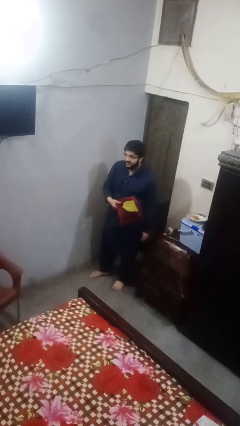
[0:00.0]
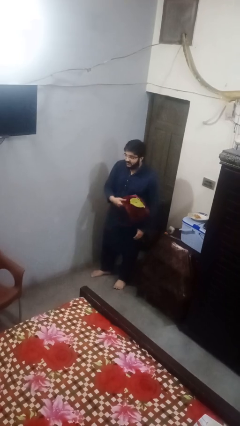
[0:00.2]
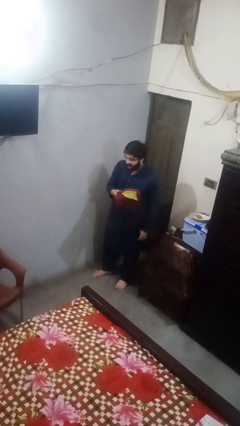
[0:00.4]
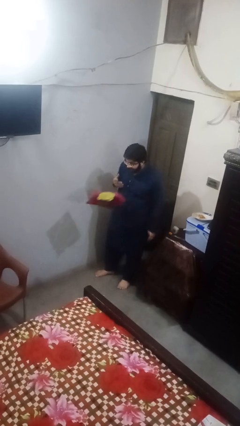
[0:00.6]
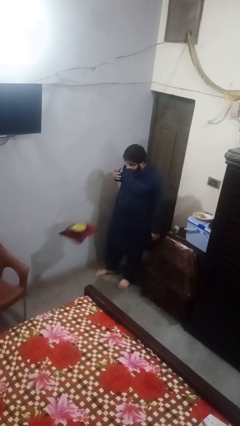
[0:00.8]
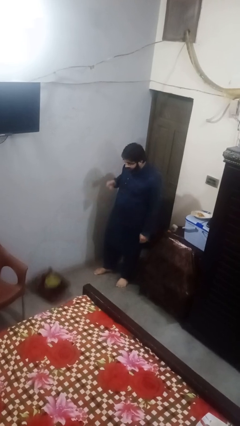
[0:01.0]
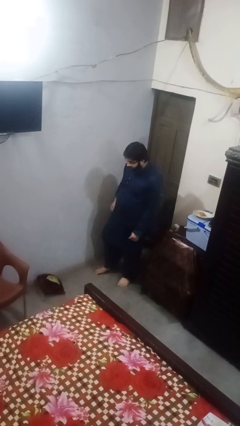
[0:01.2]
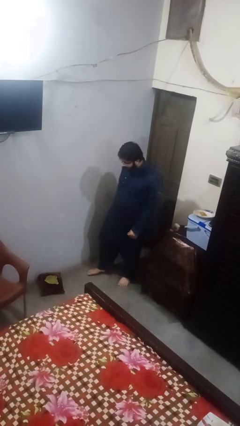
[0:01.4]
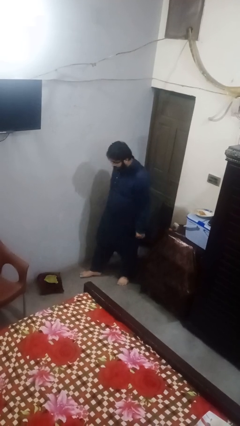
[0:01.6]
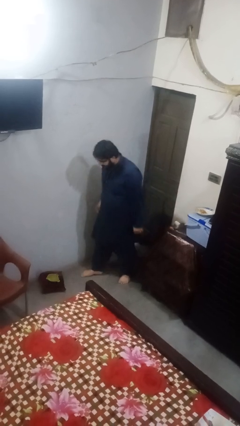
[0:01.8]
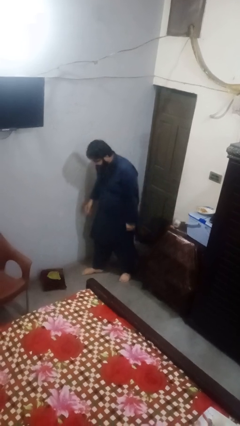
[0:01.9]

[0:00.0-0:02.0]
person throws object to ground

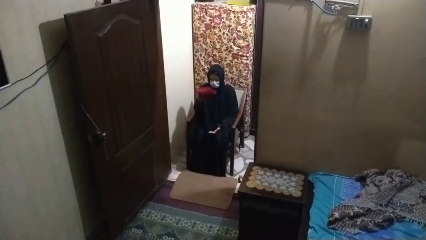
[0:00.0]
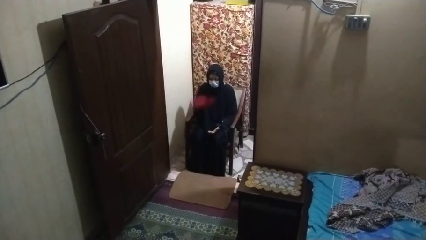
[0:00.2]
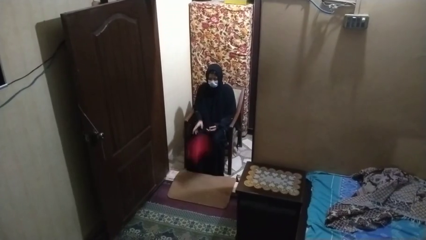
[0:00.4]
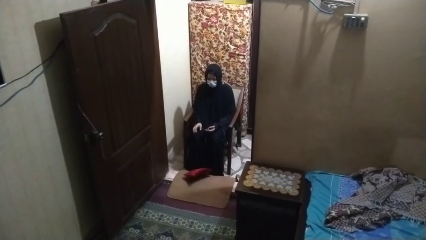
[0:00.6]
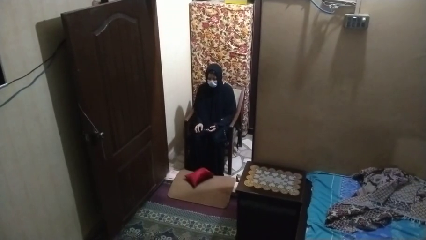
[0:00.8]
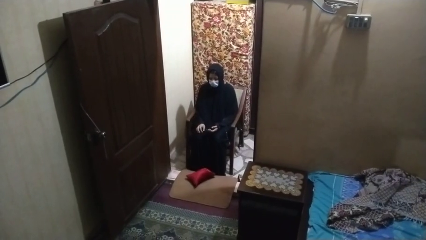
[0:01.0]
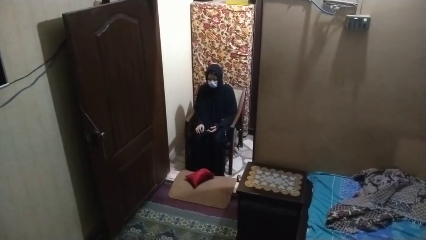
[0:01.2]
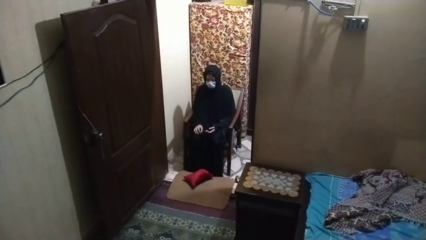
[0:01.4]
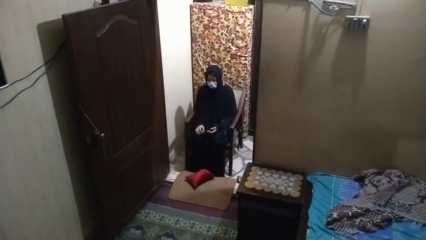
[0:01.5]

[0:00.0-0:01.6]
person throws object into air

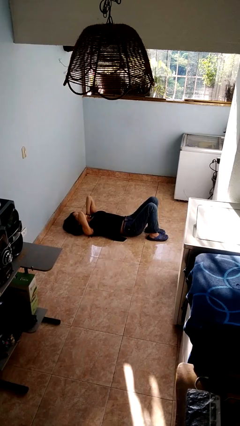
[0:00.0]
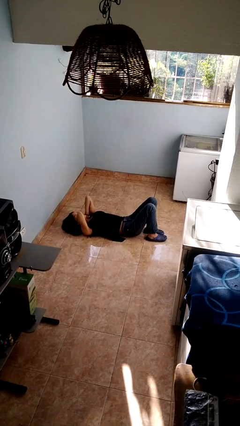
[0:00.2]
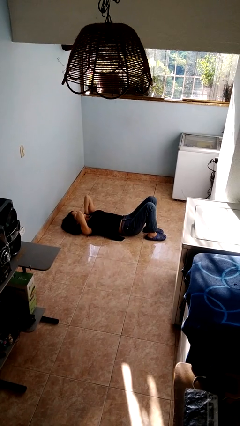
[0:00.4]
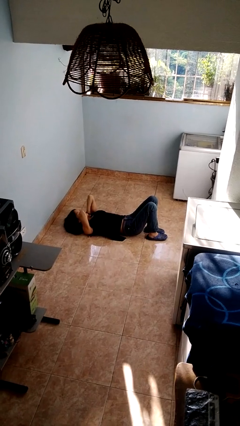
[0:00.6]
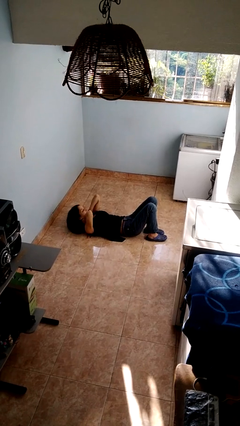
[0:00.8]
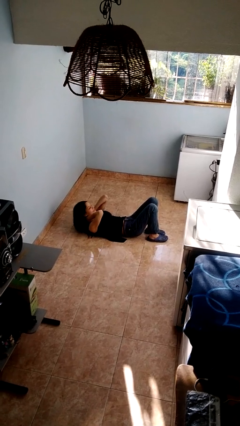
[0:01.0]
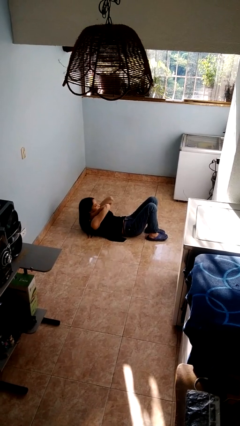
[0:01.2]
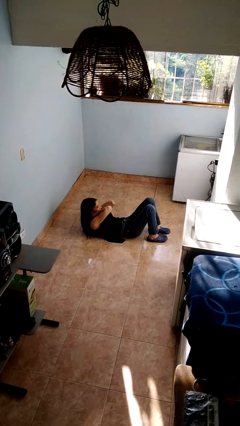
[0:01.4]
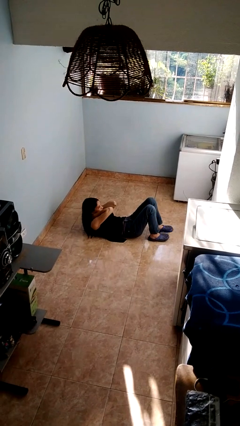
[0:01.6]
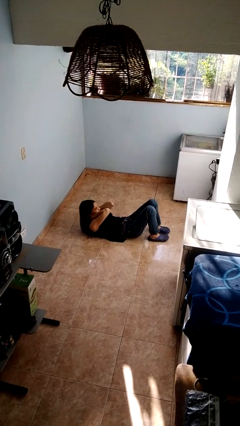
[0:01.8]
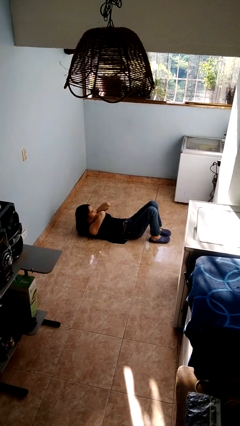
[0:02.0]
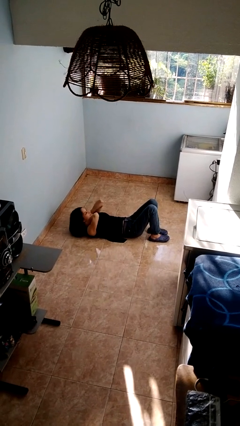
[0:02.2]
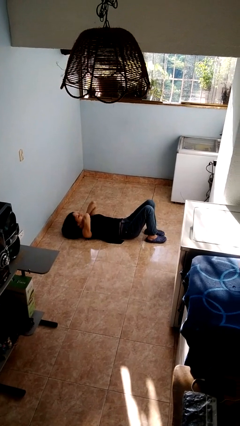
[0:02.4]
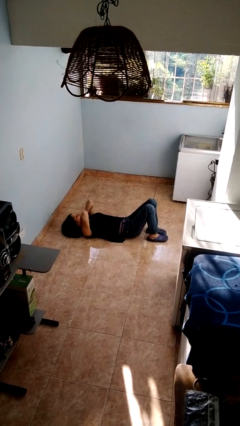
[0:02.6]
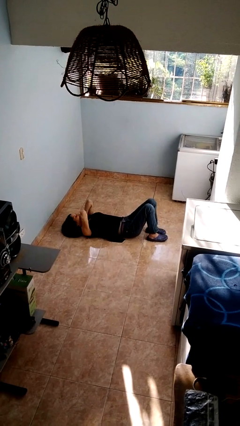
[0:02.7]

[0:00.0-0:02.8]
person exercises with situp

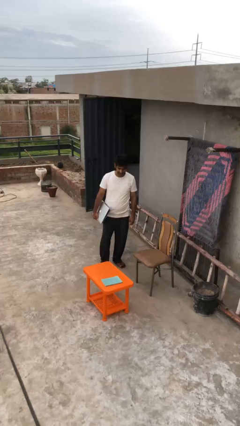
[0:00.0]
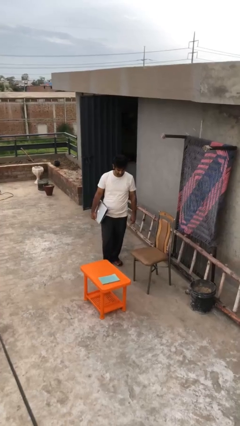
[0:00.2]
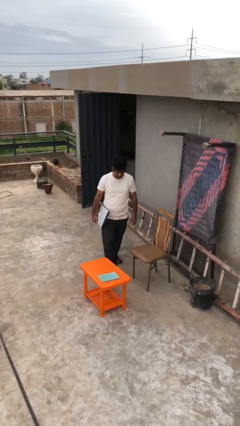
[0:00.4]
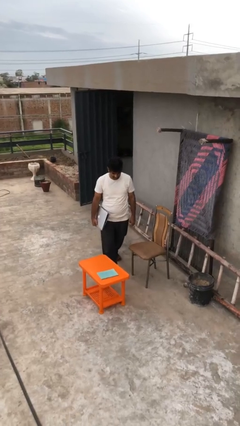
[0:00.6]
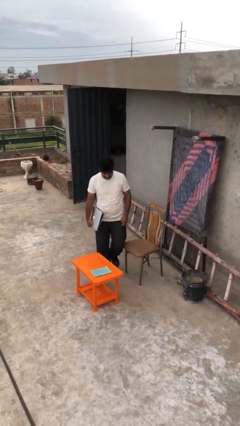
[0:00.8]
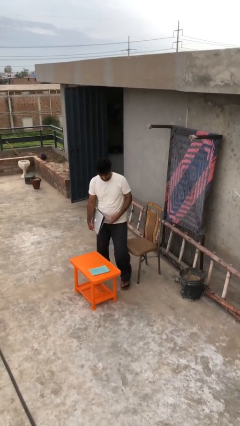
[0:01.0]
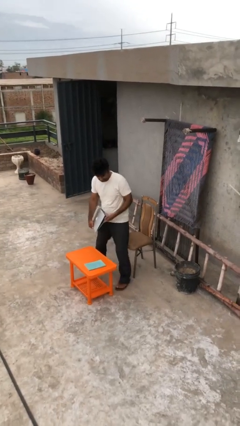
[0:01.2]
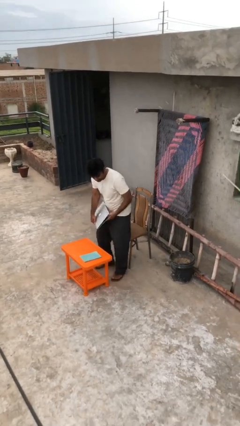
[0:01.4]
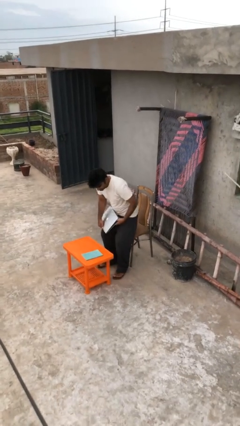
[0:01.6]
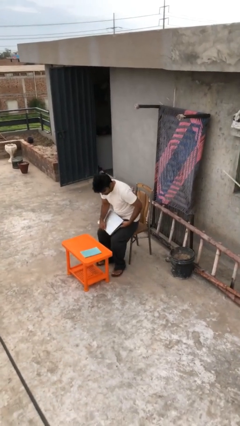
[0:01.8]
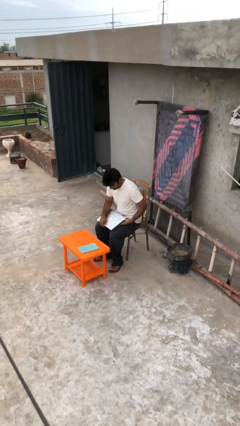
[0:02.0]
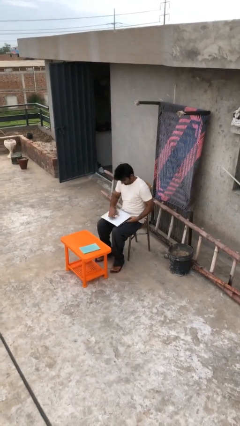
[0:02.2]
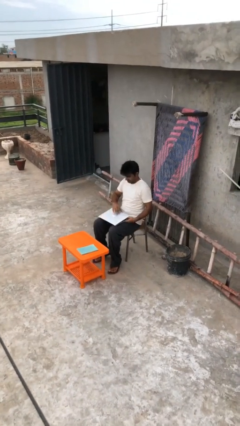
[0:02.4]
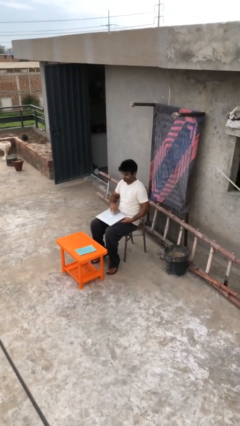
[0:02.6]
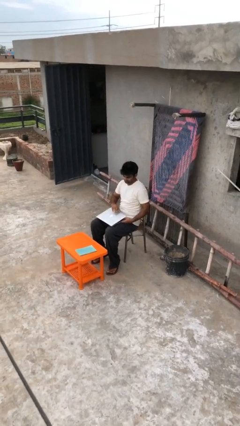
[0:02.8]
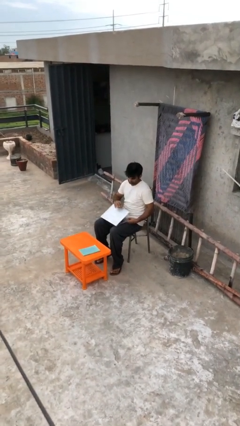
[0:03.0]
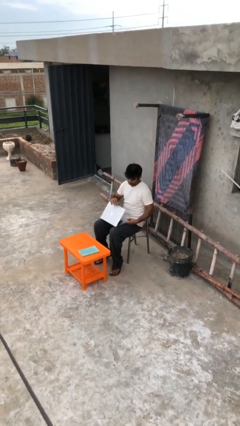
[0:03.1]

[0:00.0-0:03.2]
person sits down

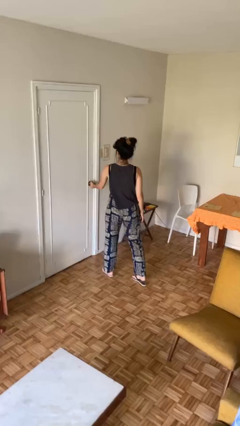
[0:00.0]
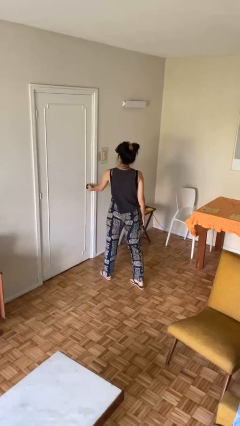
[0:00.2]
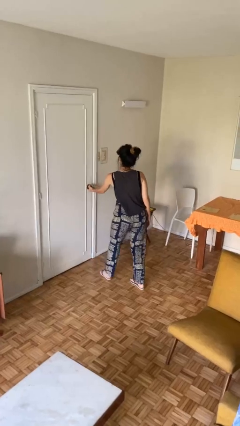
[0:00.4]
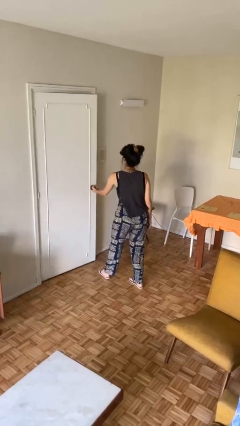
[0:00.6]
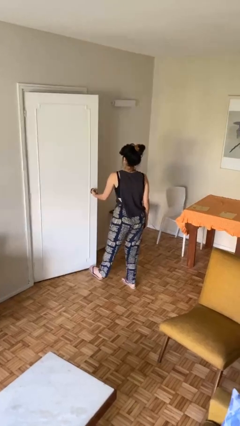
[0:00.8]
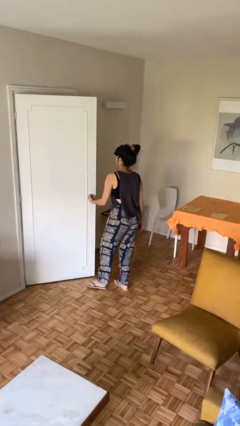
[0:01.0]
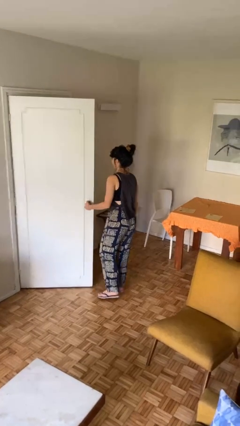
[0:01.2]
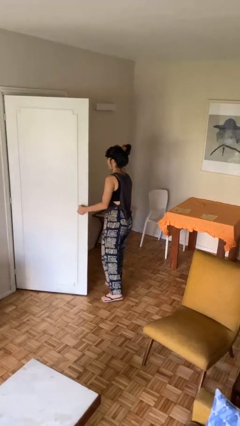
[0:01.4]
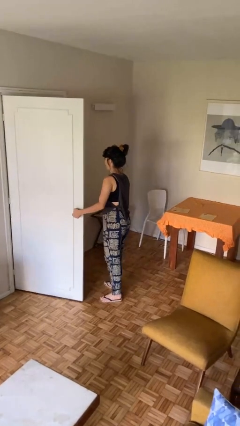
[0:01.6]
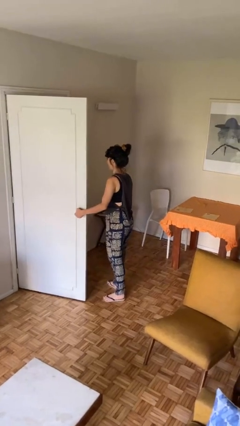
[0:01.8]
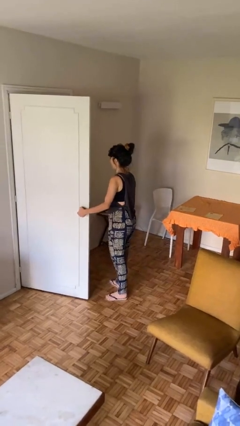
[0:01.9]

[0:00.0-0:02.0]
person opens facility door

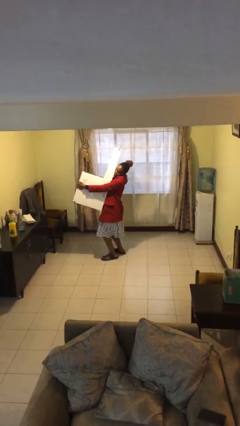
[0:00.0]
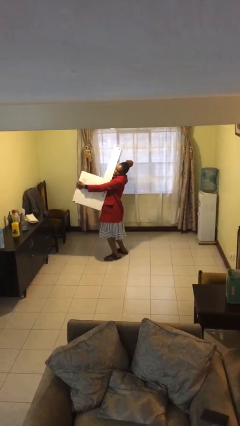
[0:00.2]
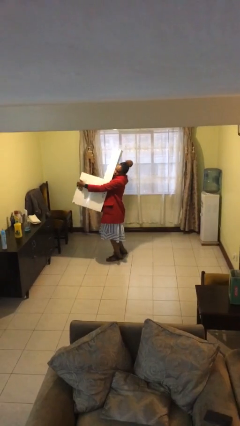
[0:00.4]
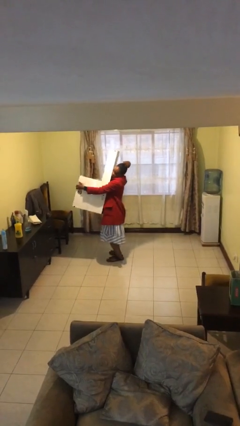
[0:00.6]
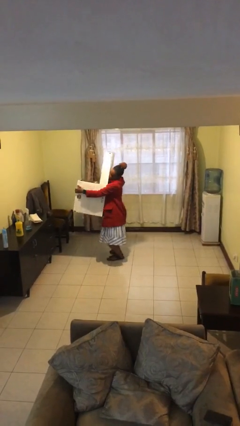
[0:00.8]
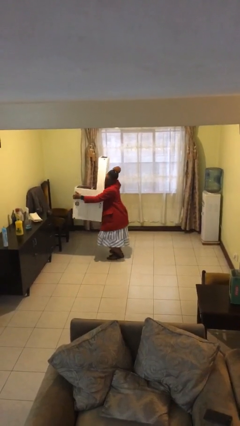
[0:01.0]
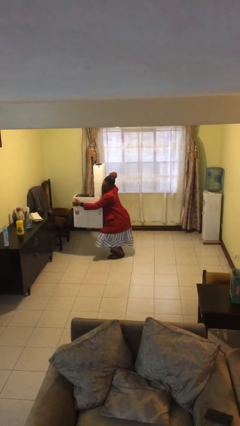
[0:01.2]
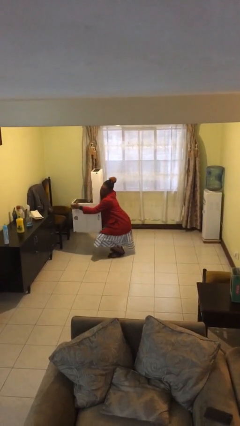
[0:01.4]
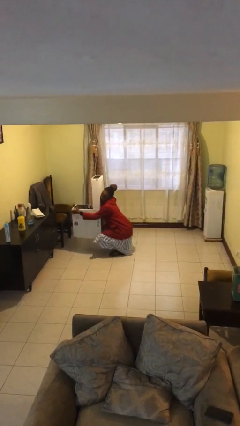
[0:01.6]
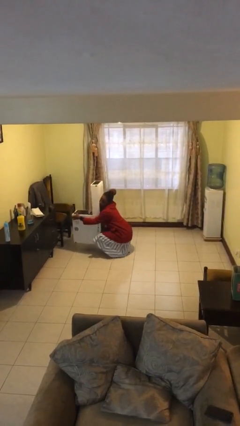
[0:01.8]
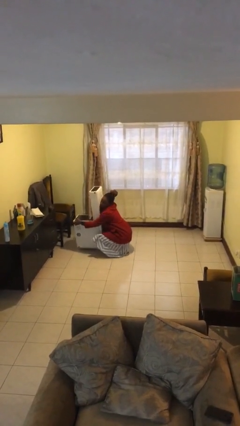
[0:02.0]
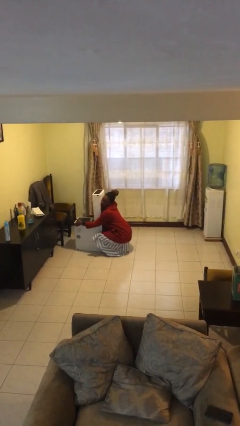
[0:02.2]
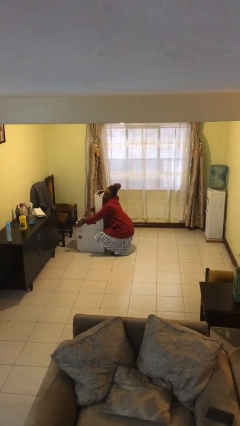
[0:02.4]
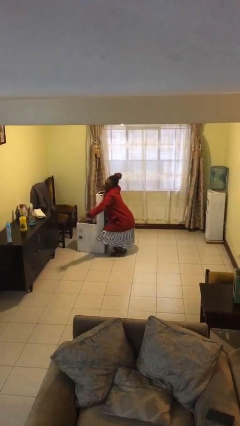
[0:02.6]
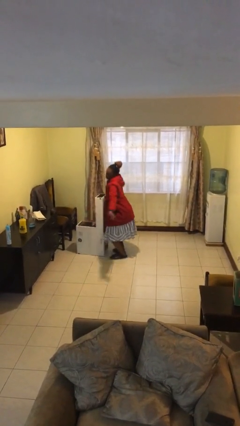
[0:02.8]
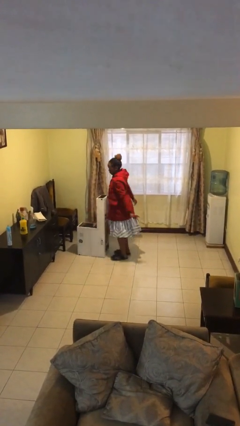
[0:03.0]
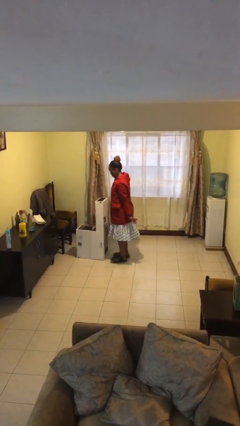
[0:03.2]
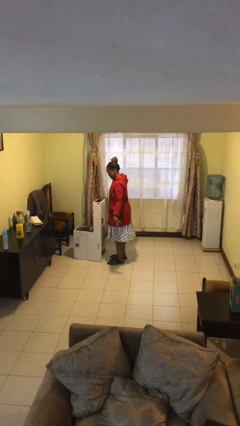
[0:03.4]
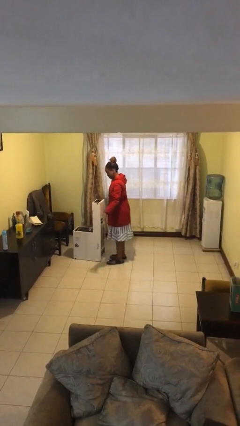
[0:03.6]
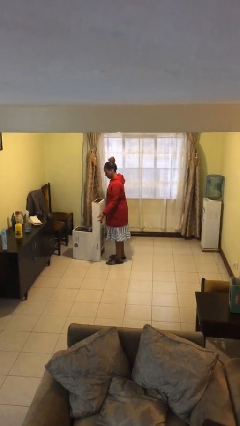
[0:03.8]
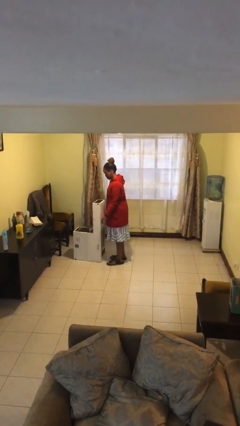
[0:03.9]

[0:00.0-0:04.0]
person puts down object on floor

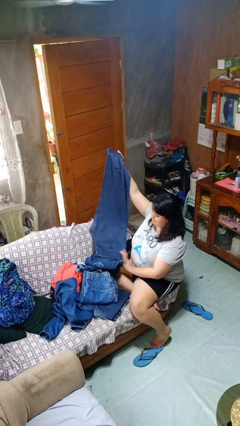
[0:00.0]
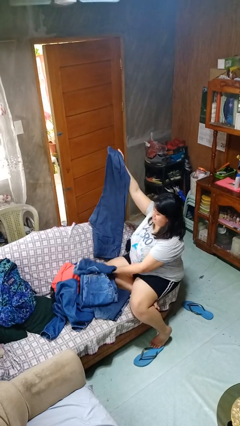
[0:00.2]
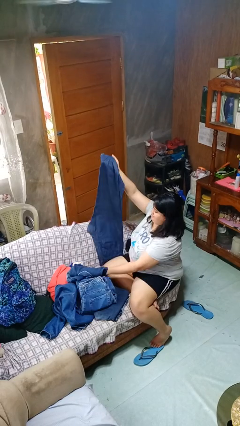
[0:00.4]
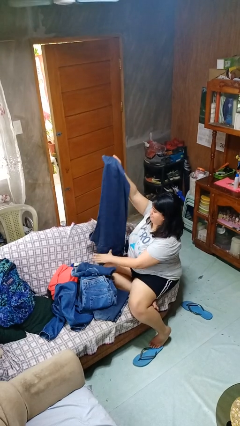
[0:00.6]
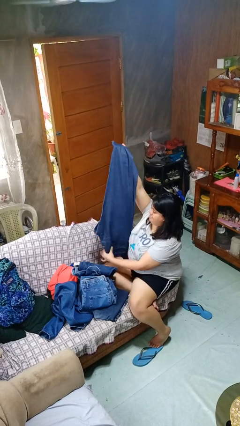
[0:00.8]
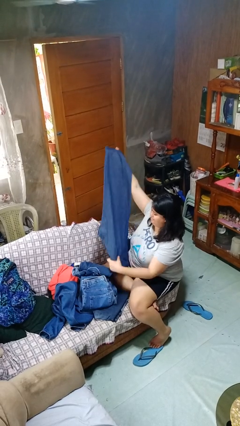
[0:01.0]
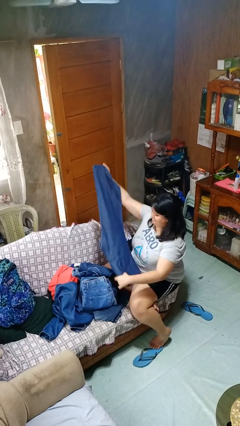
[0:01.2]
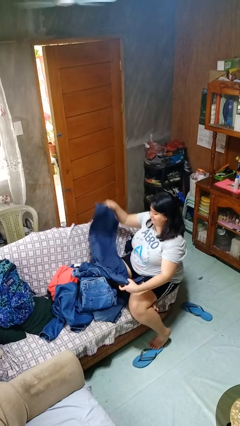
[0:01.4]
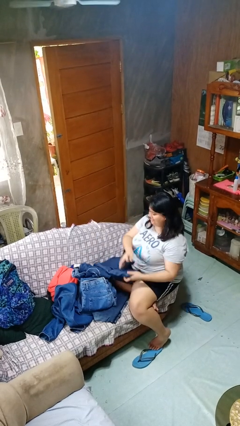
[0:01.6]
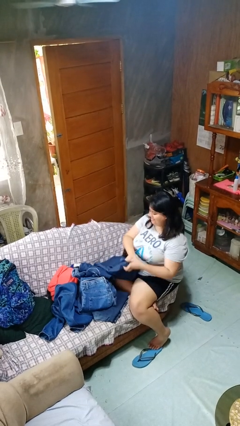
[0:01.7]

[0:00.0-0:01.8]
person folds pants
